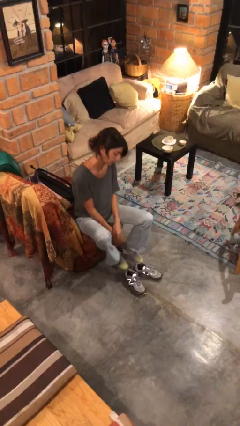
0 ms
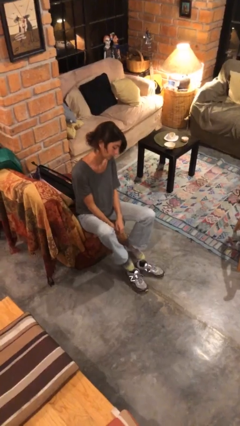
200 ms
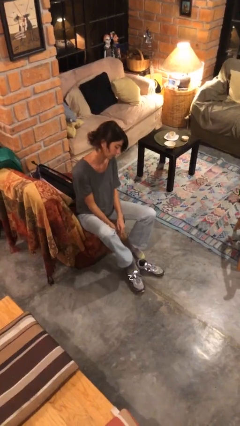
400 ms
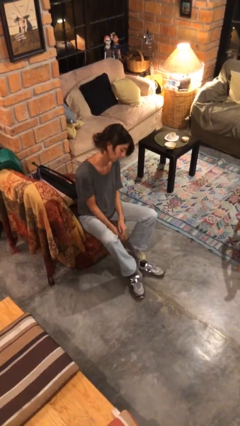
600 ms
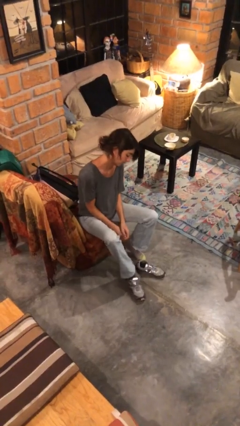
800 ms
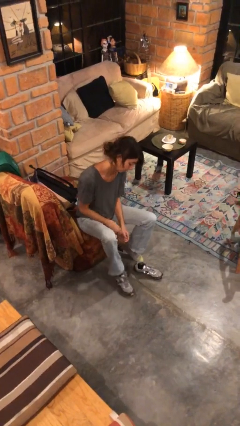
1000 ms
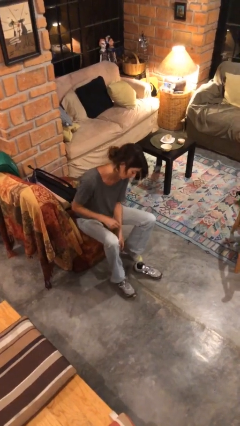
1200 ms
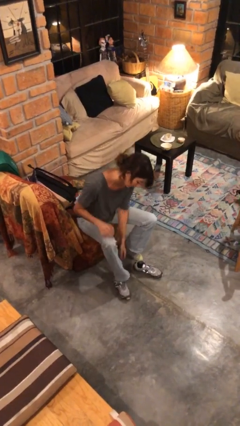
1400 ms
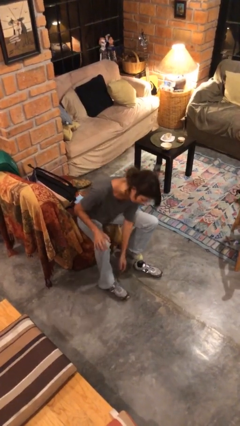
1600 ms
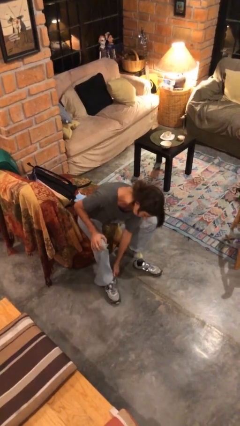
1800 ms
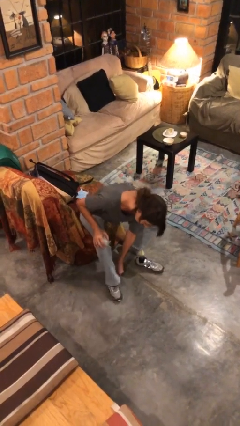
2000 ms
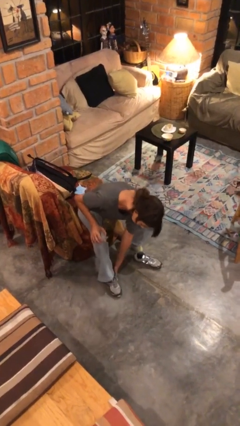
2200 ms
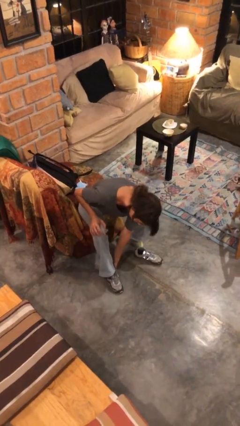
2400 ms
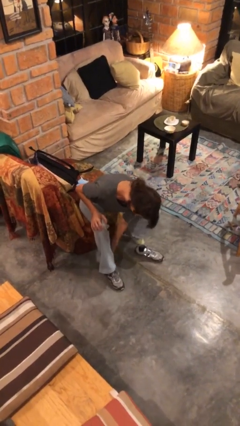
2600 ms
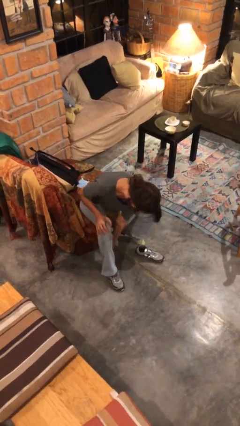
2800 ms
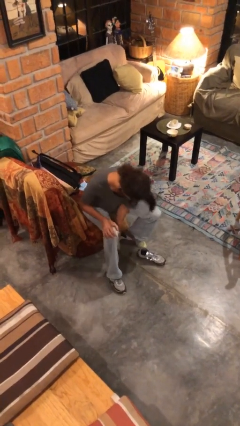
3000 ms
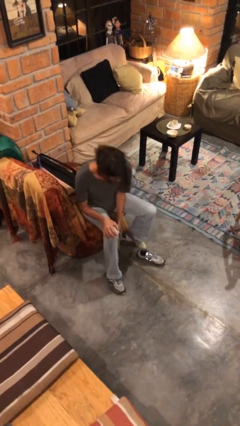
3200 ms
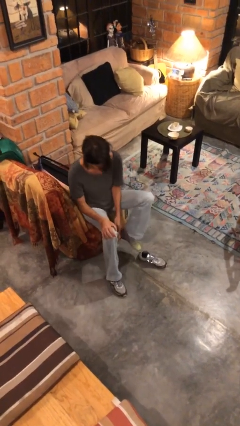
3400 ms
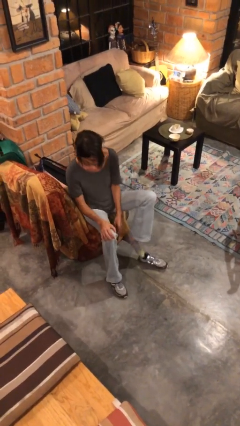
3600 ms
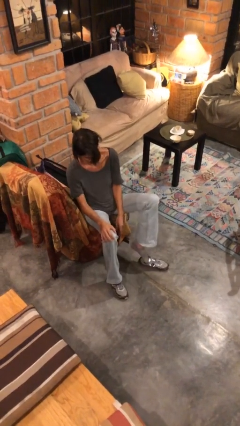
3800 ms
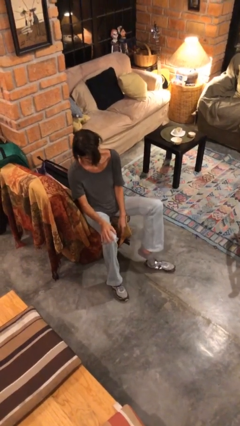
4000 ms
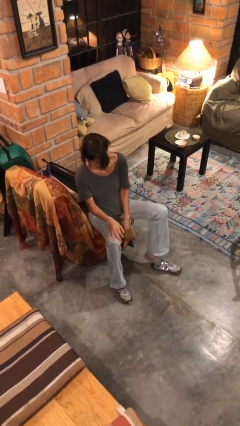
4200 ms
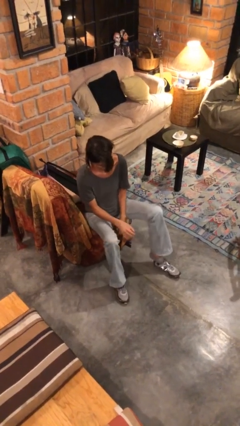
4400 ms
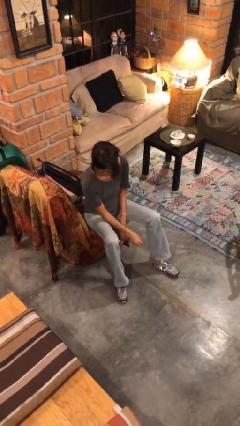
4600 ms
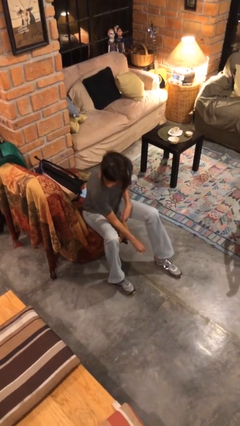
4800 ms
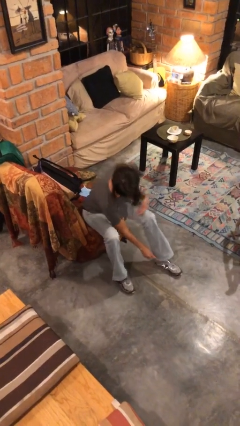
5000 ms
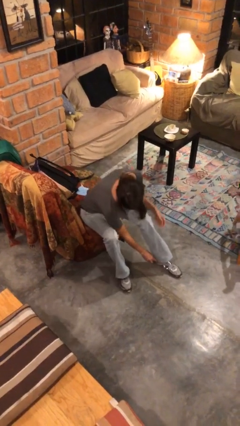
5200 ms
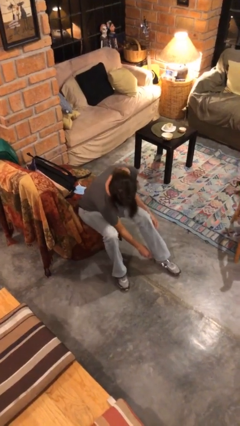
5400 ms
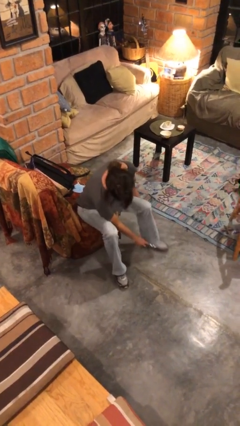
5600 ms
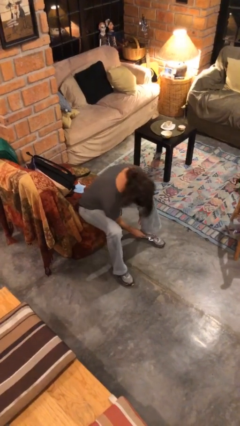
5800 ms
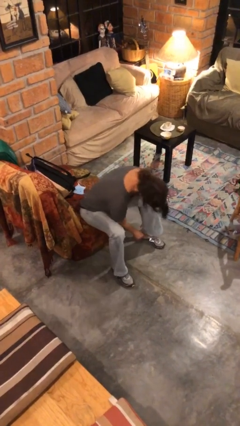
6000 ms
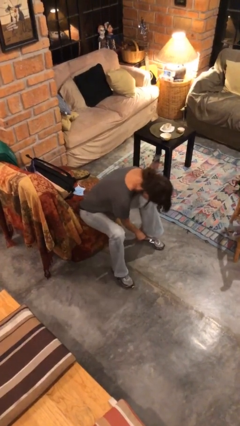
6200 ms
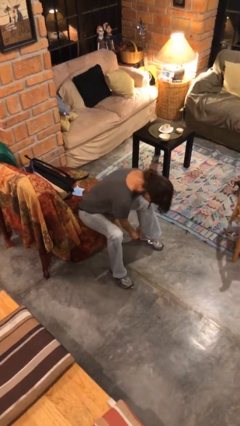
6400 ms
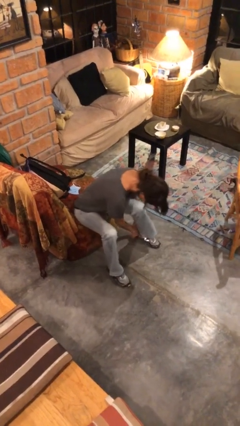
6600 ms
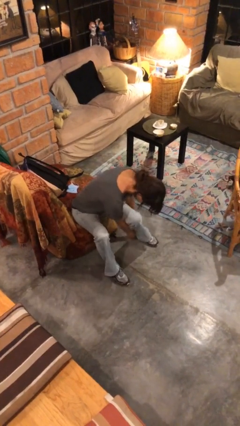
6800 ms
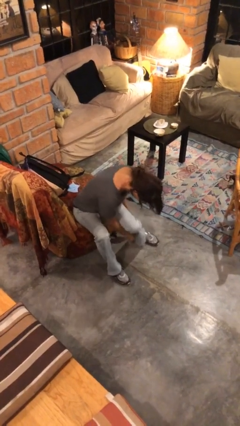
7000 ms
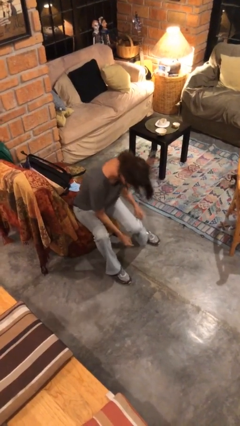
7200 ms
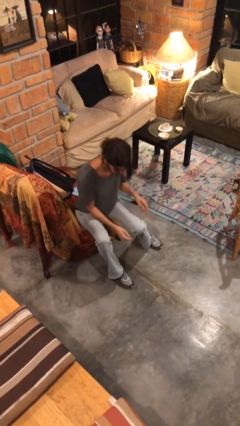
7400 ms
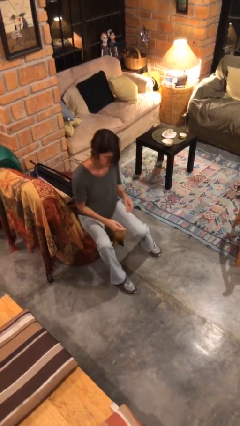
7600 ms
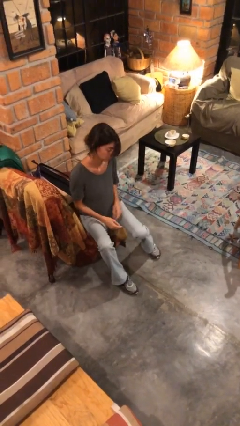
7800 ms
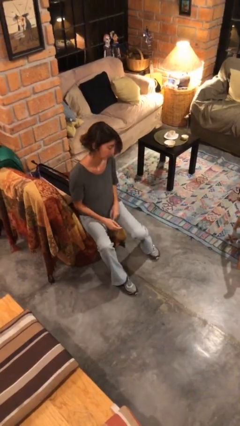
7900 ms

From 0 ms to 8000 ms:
person puts on shoes

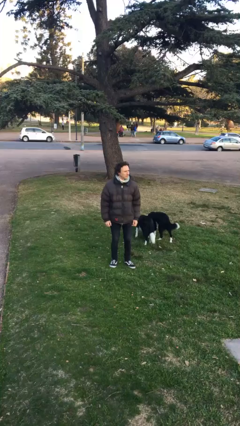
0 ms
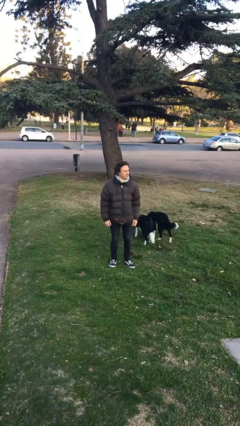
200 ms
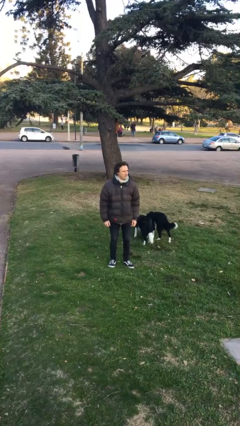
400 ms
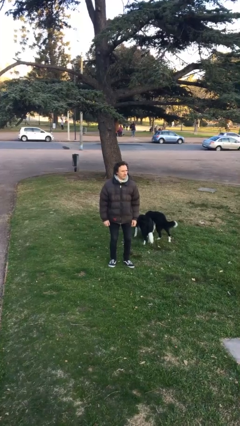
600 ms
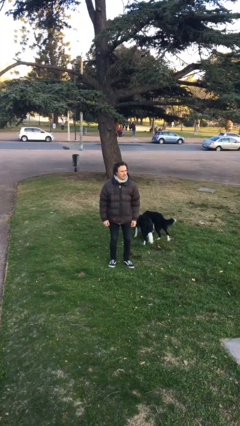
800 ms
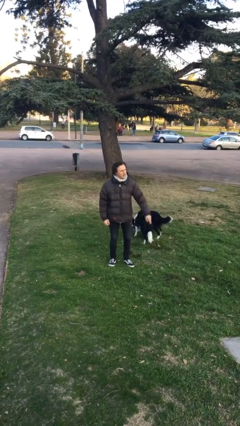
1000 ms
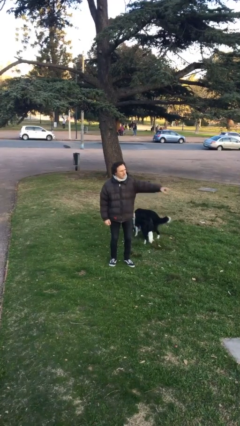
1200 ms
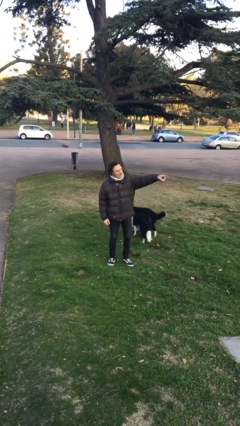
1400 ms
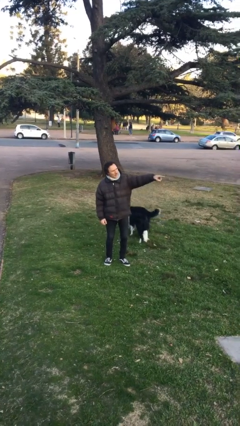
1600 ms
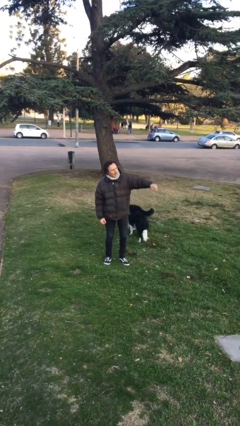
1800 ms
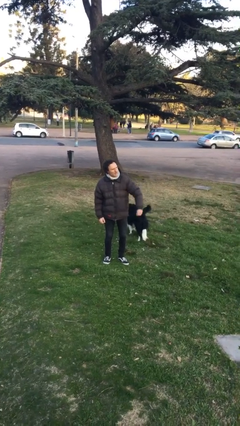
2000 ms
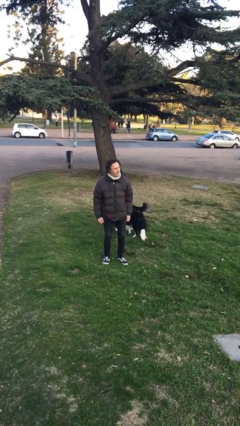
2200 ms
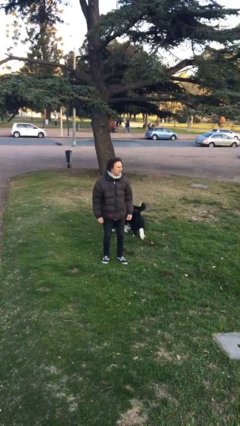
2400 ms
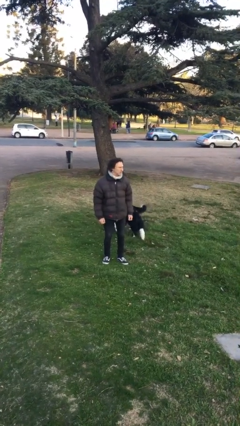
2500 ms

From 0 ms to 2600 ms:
person points at person

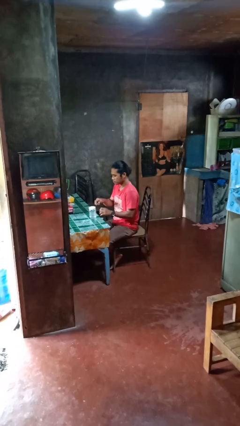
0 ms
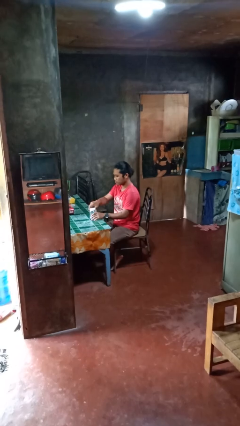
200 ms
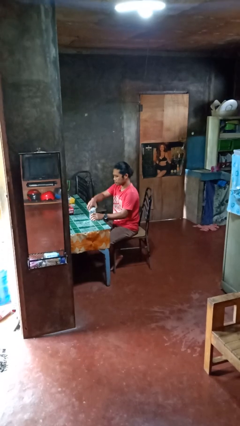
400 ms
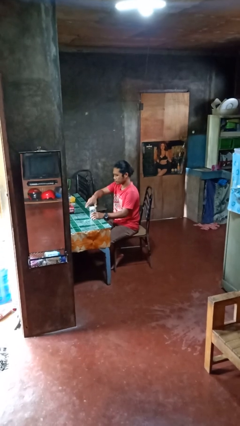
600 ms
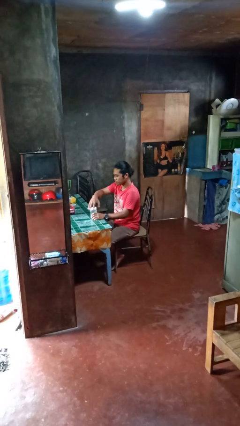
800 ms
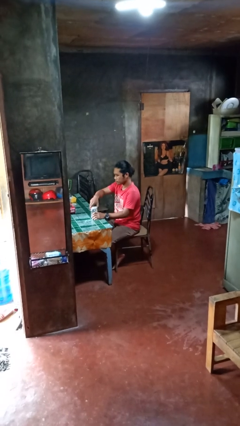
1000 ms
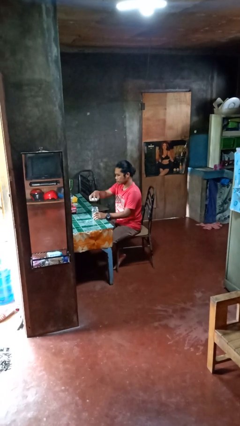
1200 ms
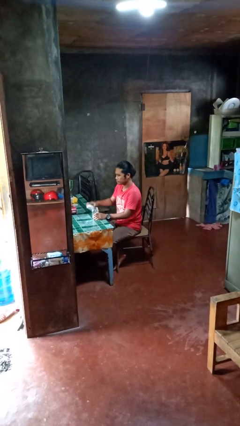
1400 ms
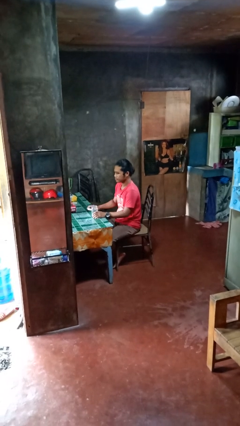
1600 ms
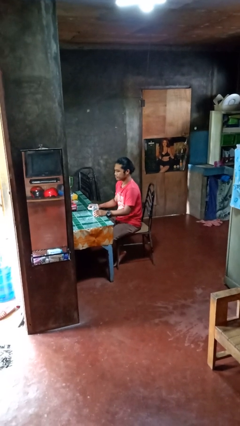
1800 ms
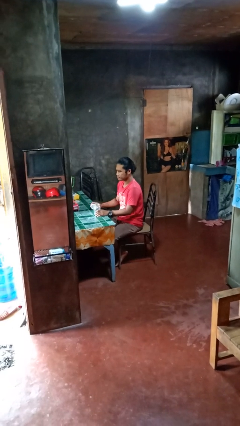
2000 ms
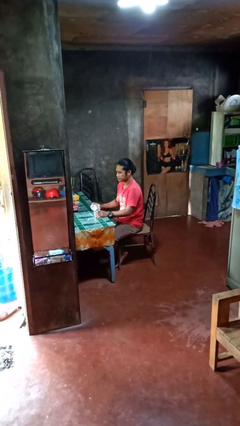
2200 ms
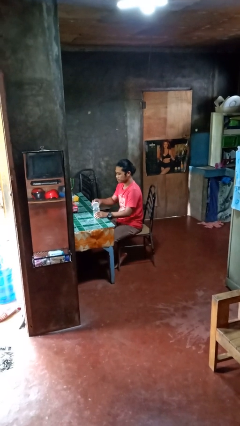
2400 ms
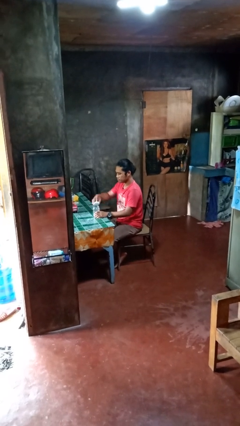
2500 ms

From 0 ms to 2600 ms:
person opens jar

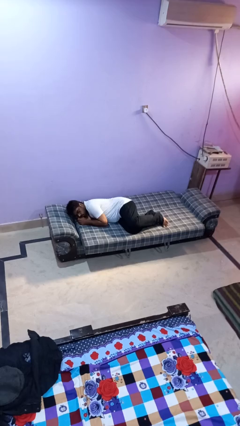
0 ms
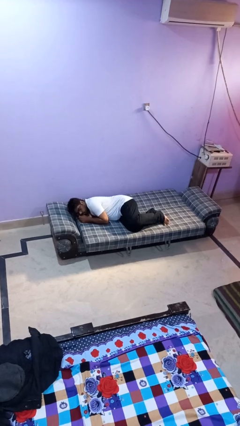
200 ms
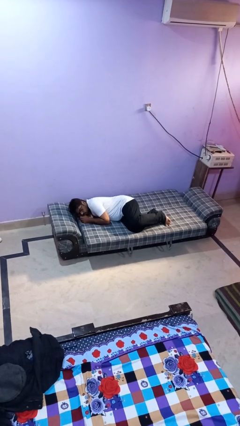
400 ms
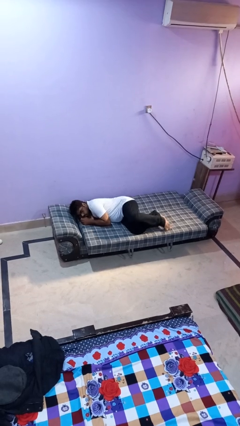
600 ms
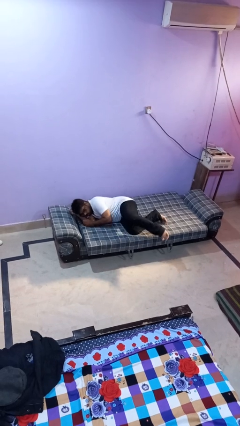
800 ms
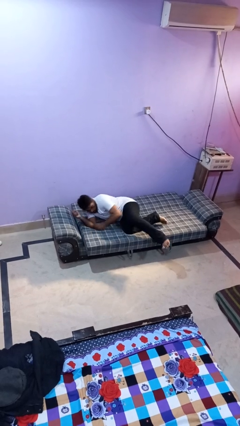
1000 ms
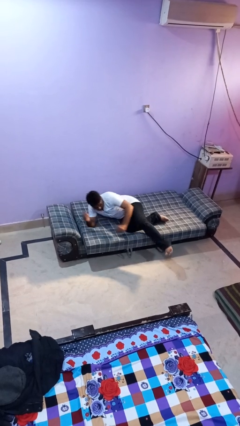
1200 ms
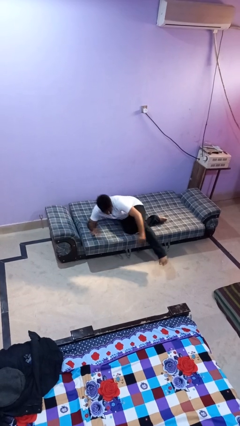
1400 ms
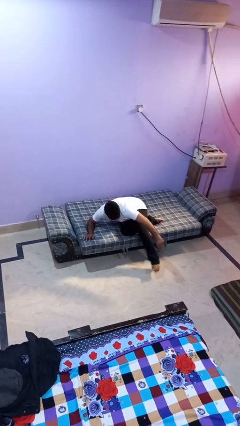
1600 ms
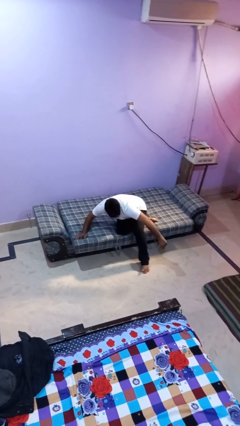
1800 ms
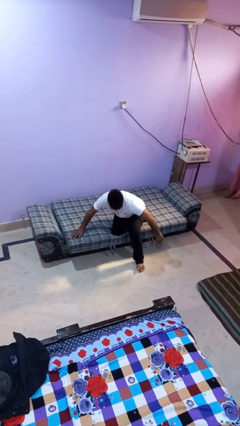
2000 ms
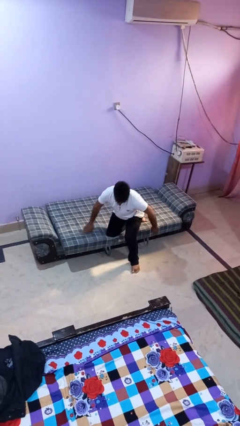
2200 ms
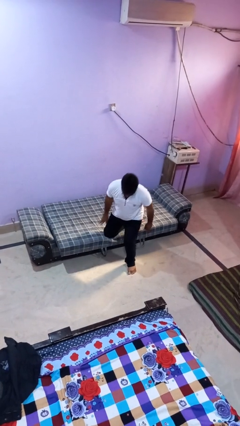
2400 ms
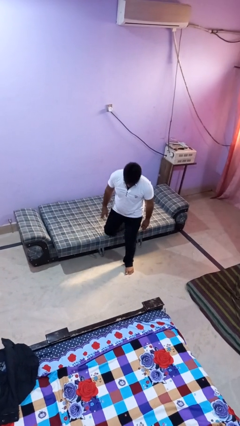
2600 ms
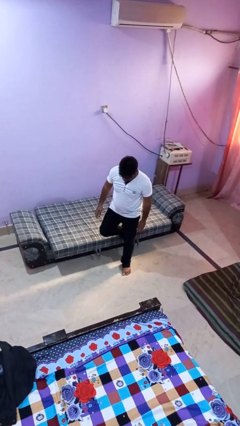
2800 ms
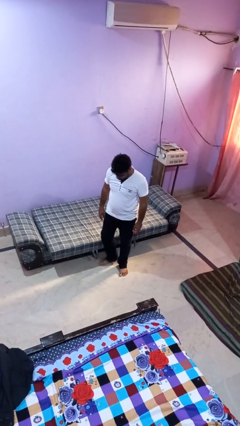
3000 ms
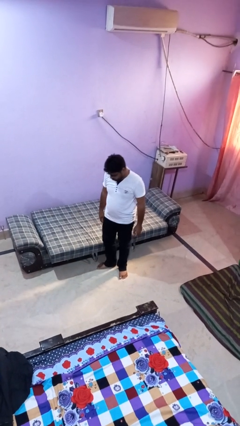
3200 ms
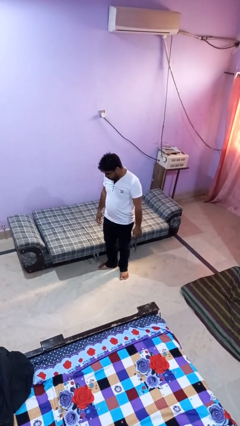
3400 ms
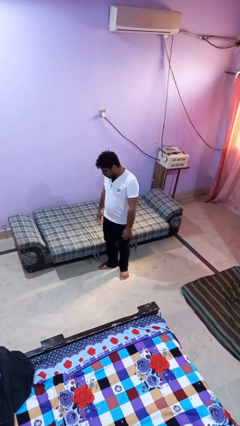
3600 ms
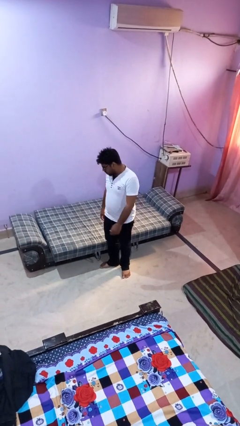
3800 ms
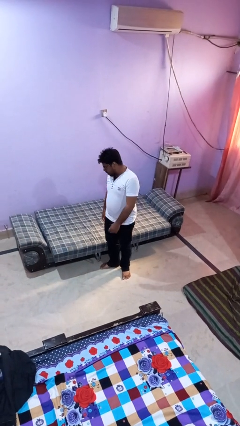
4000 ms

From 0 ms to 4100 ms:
person stands up

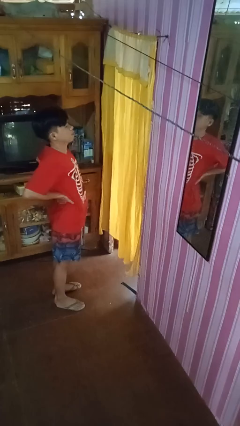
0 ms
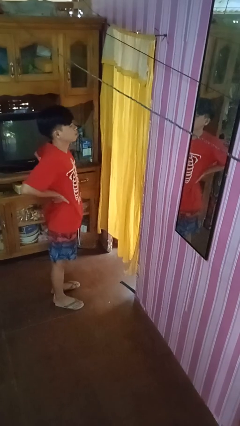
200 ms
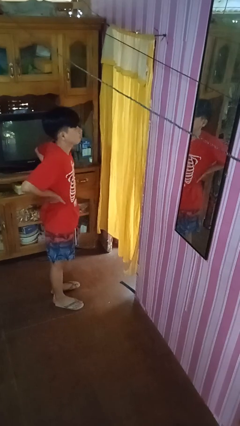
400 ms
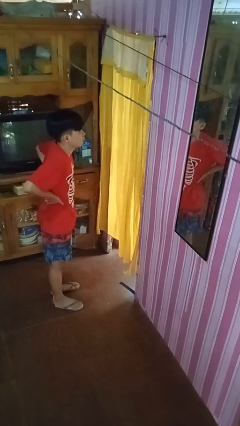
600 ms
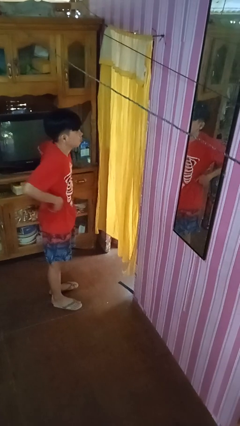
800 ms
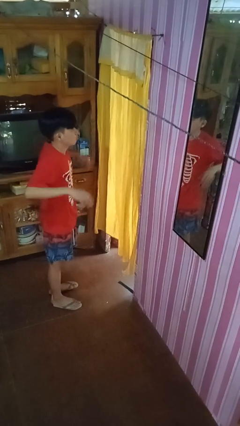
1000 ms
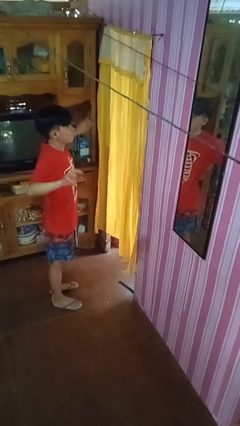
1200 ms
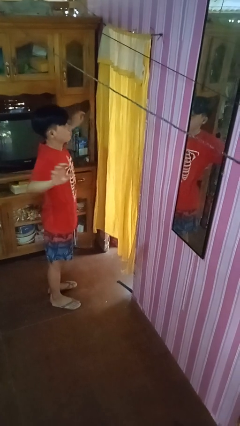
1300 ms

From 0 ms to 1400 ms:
person stretches arms to side
